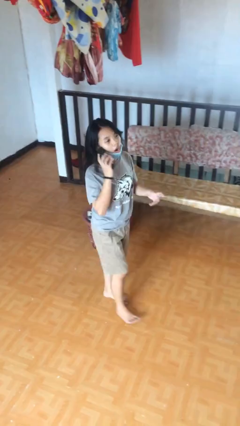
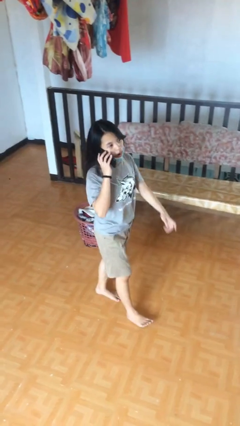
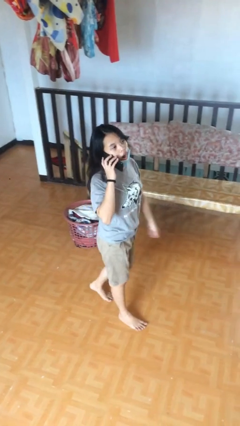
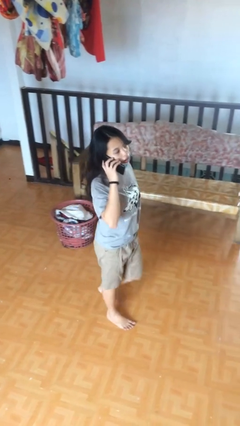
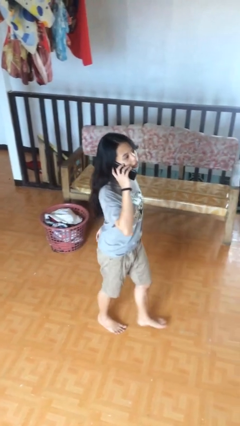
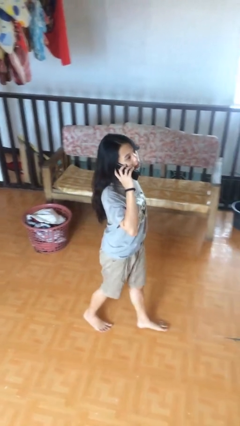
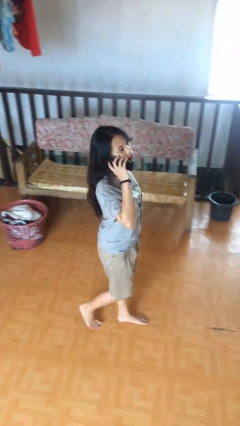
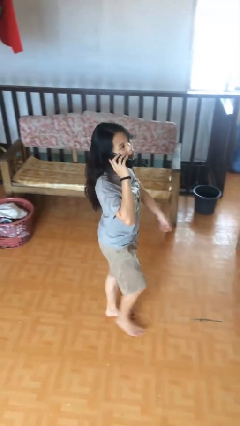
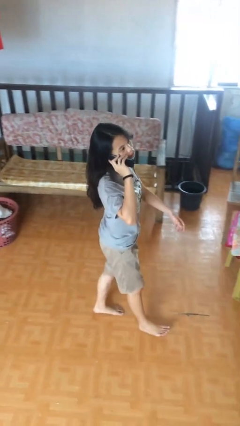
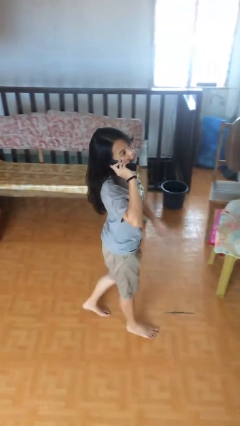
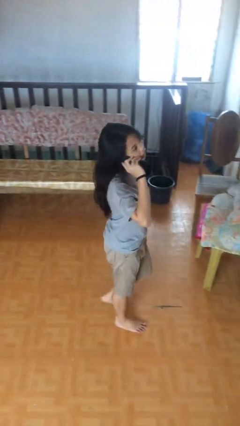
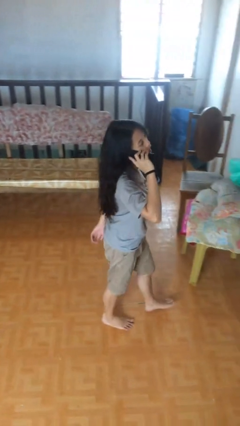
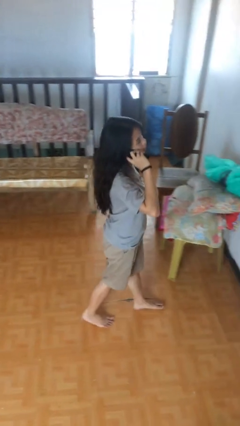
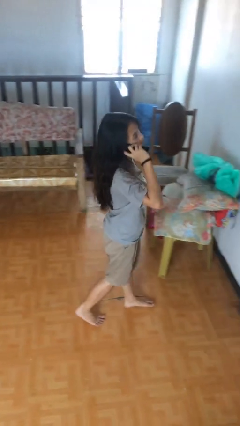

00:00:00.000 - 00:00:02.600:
person talks on phone

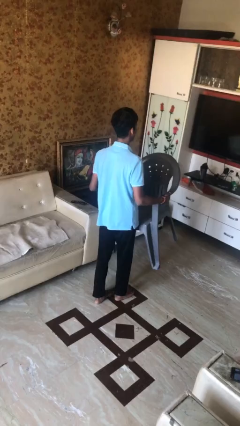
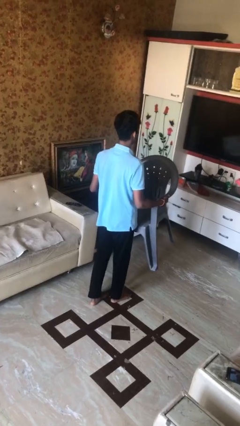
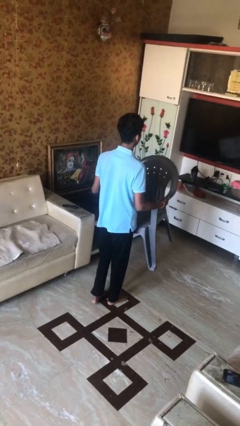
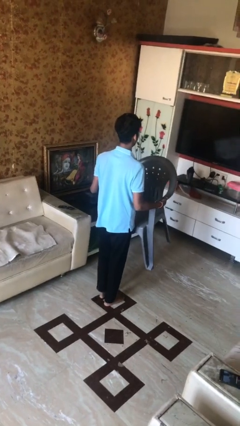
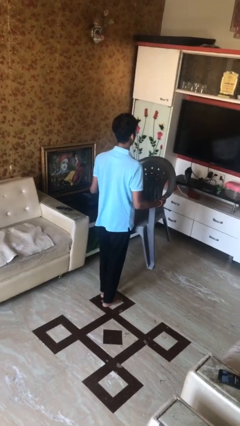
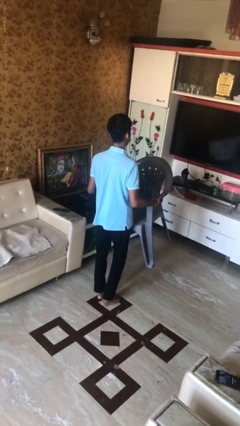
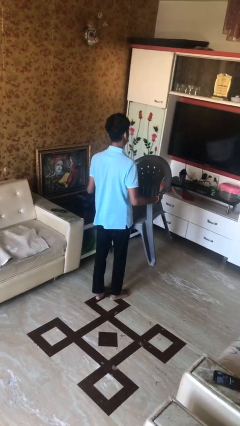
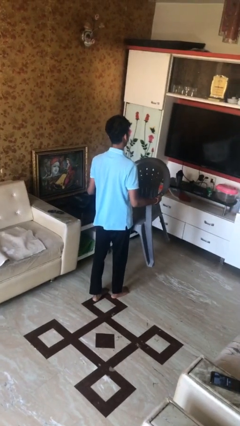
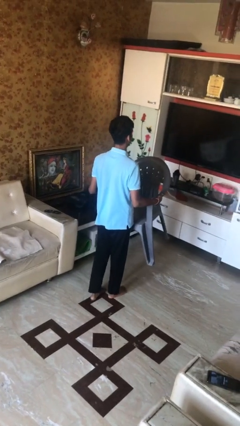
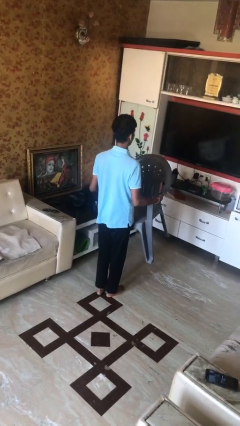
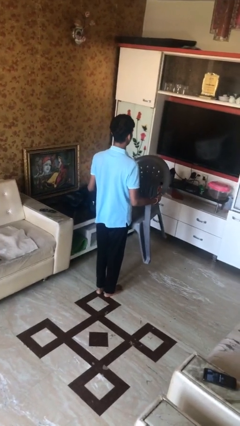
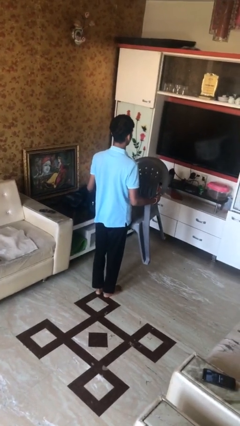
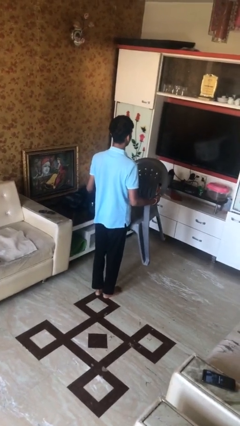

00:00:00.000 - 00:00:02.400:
person carries furniture

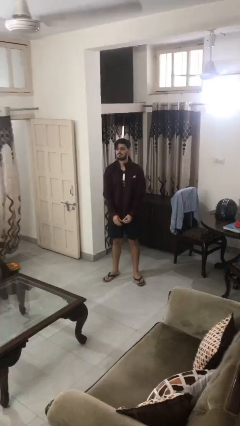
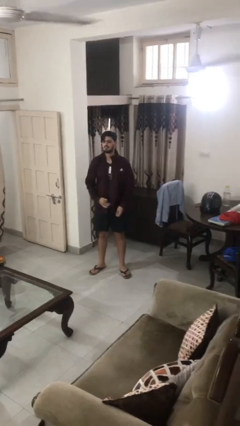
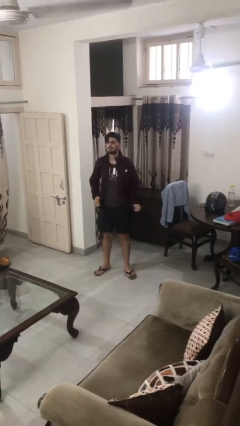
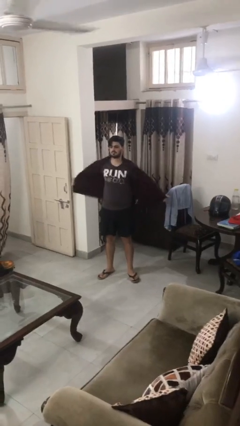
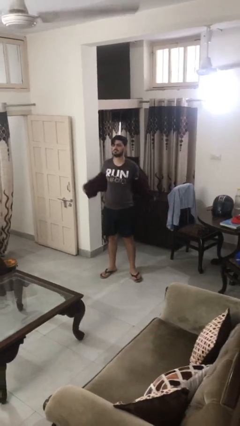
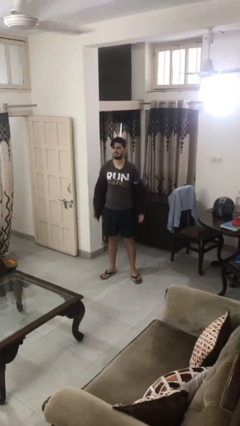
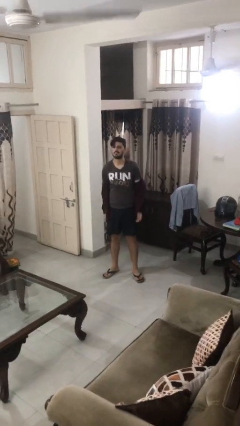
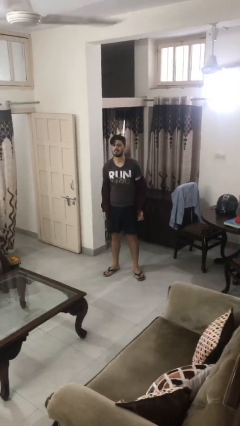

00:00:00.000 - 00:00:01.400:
person takes off jacket

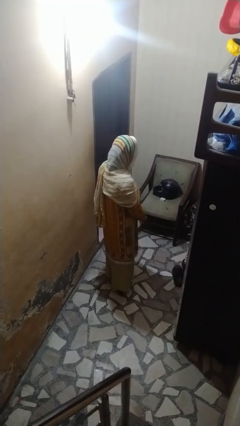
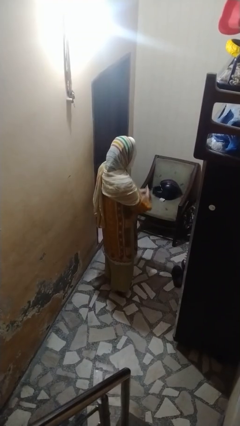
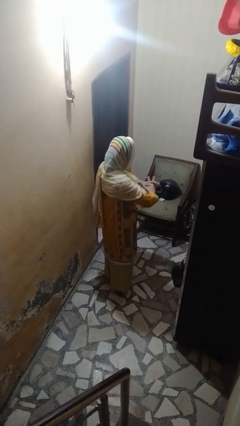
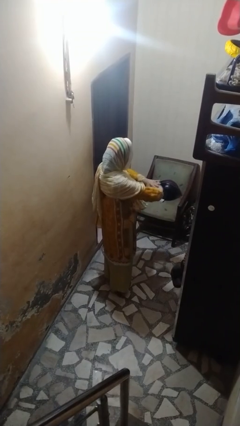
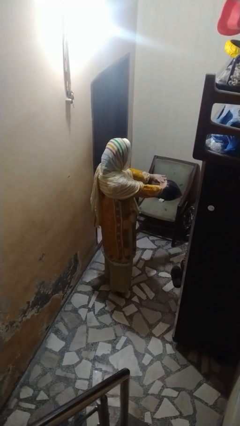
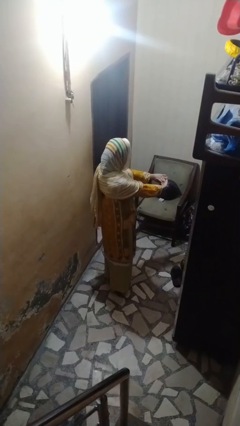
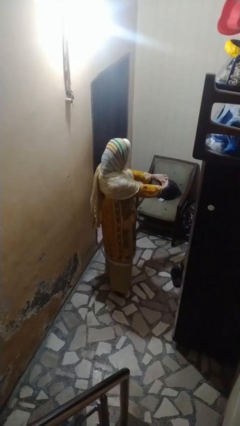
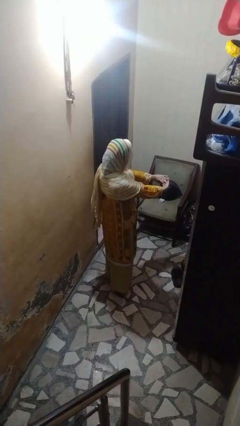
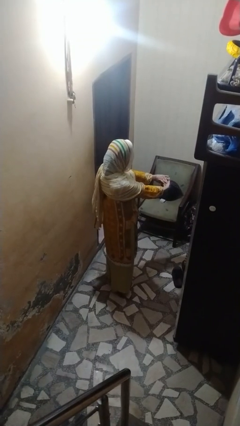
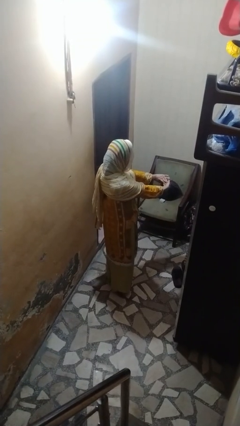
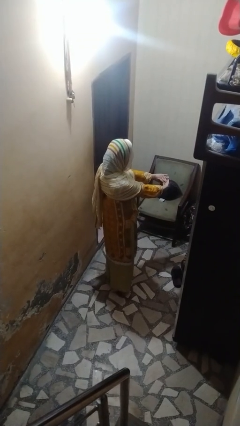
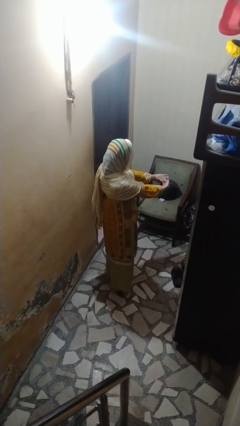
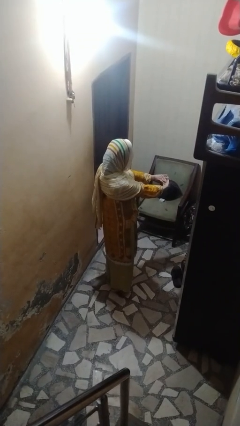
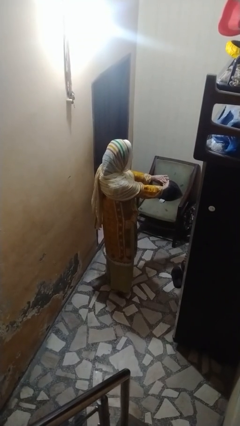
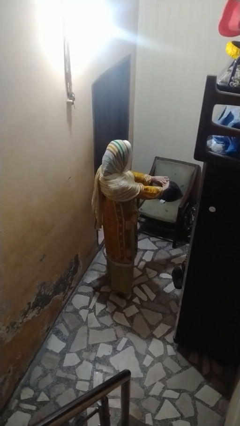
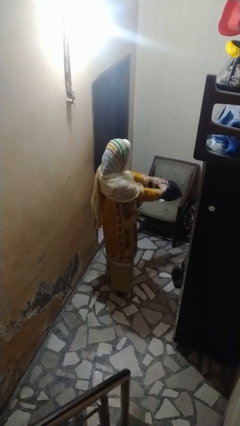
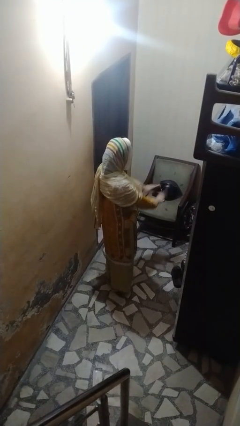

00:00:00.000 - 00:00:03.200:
person cracks knuckles

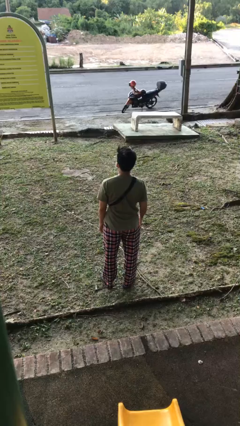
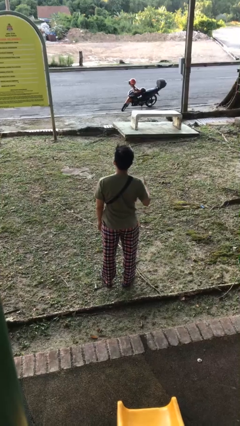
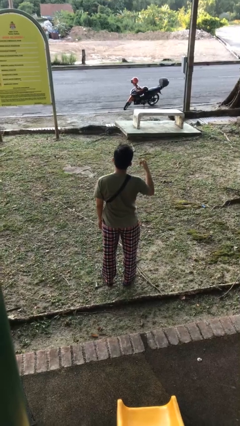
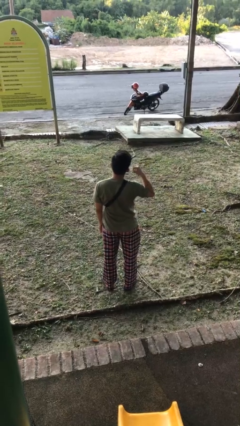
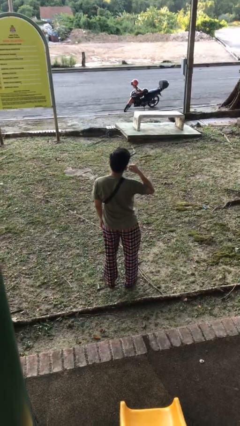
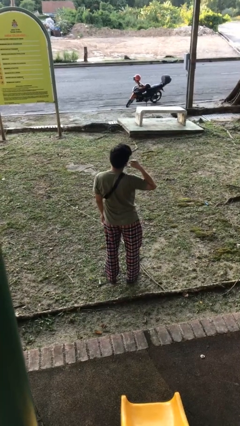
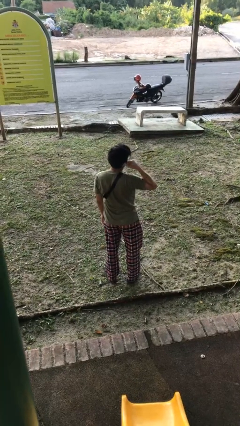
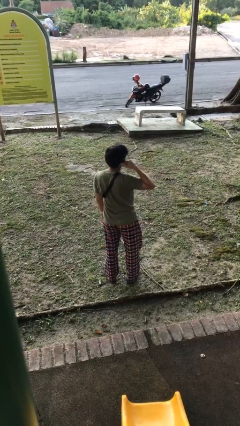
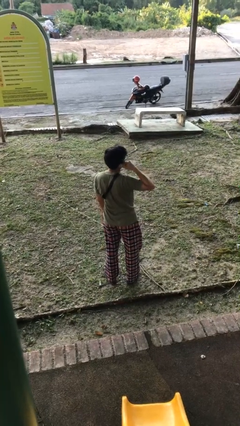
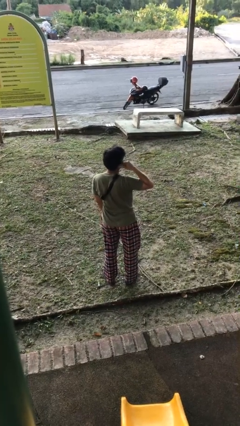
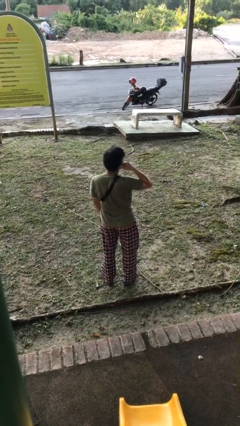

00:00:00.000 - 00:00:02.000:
person gestures call me

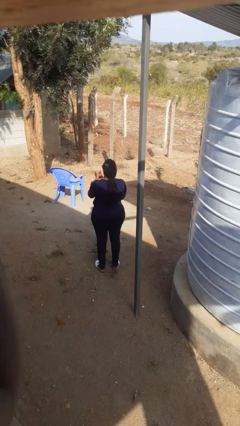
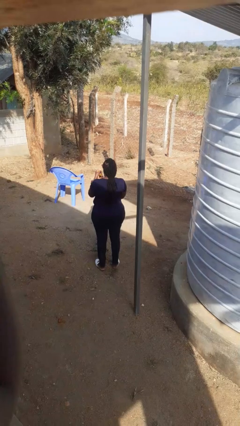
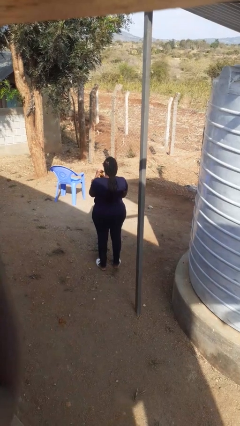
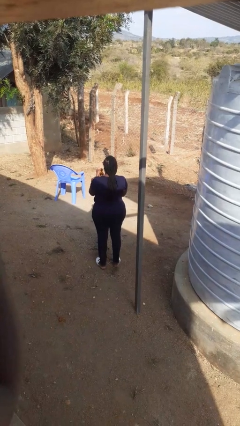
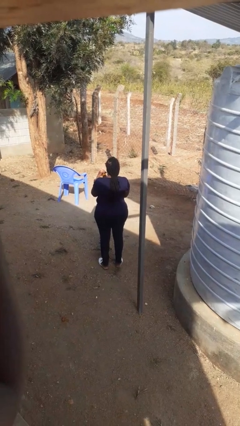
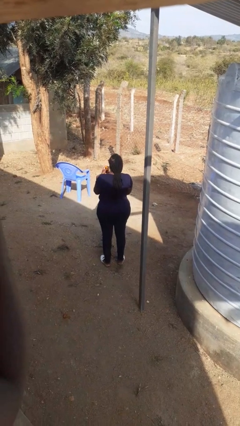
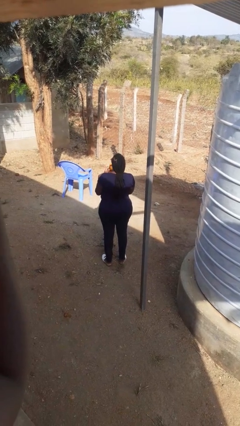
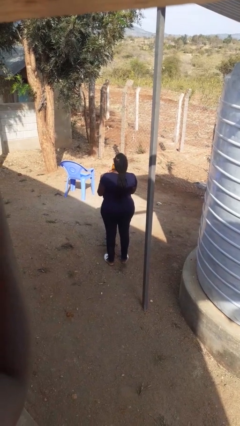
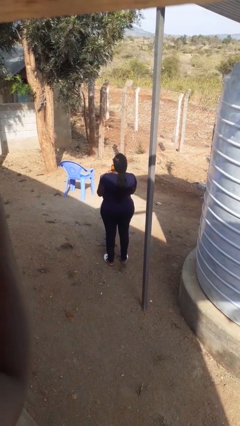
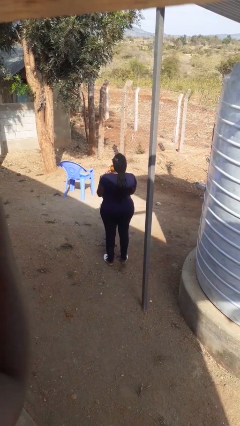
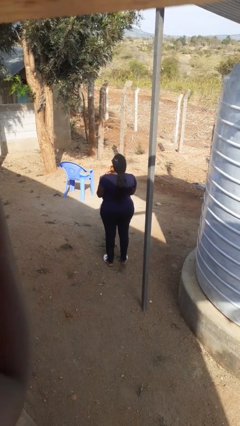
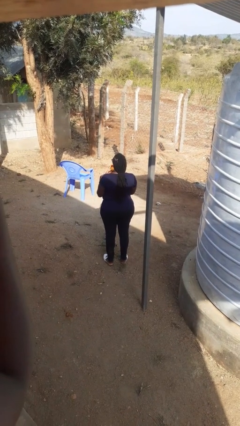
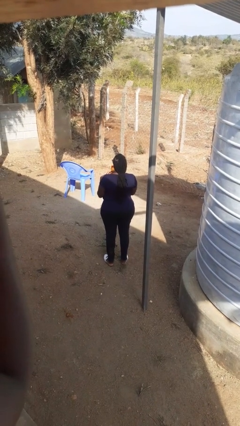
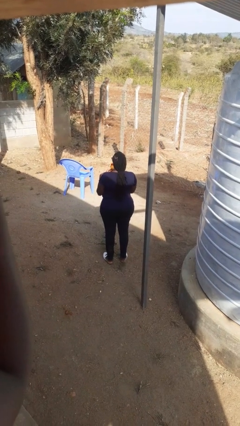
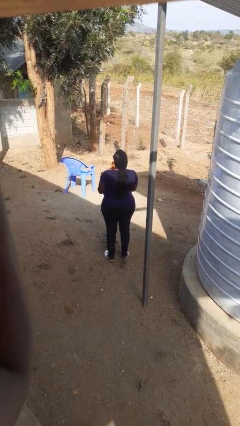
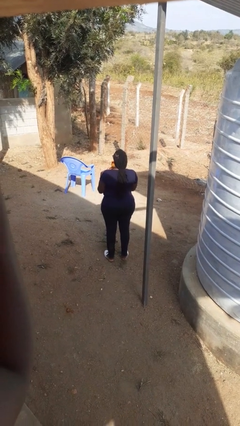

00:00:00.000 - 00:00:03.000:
person closes jar

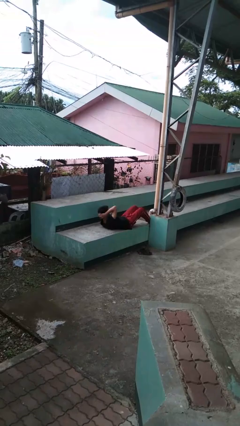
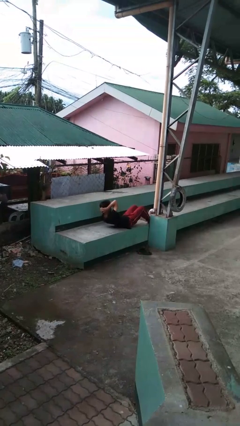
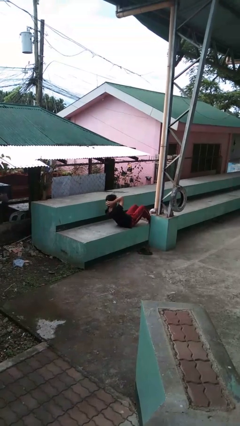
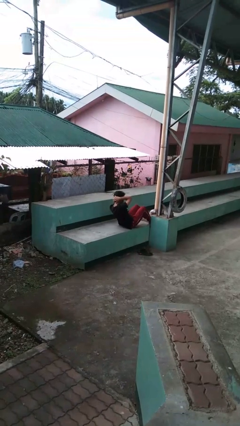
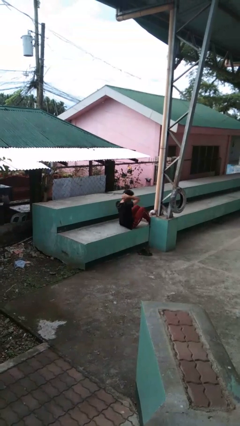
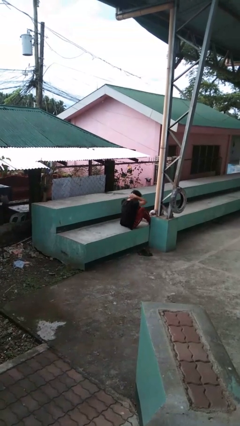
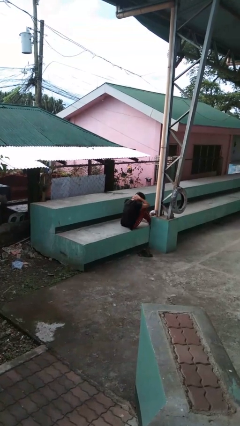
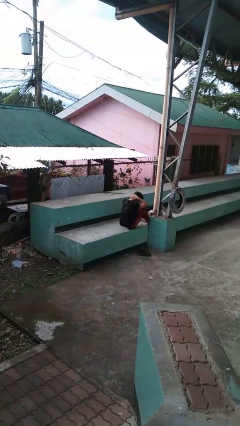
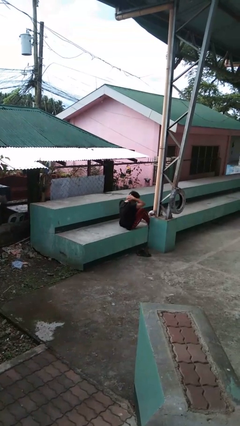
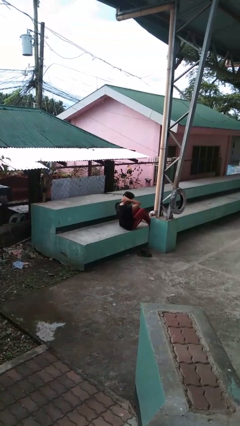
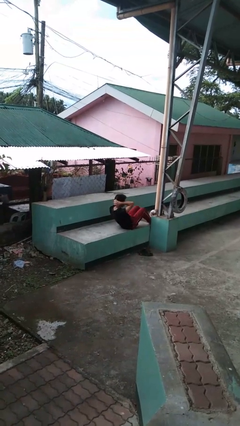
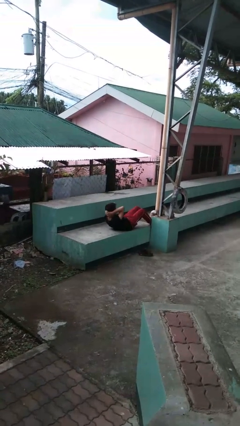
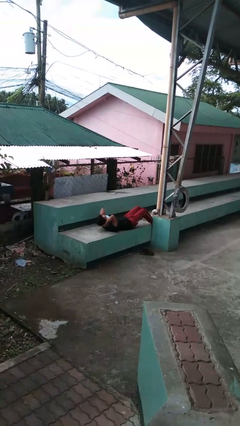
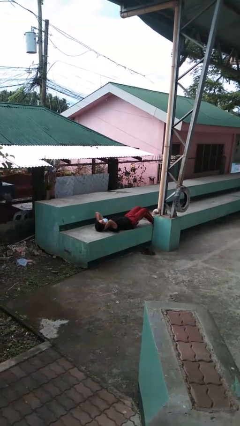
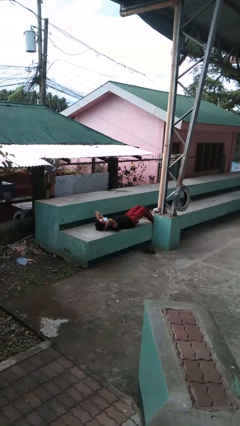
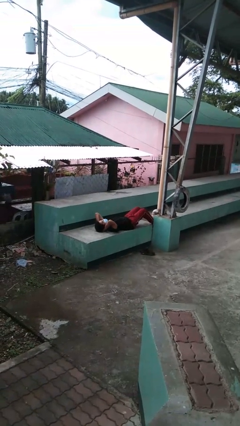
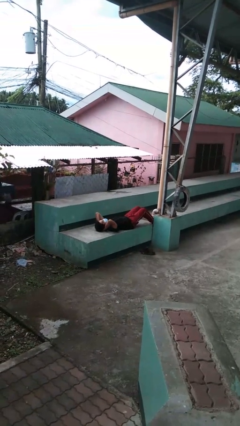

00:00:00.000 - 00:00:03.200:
person exercises with situp
